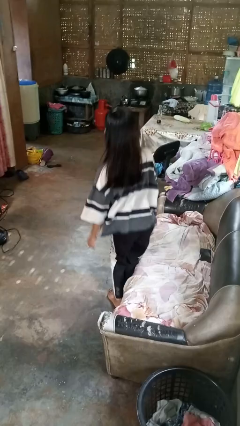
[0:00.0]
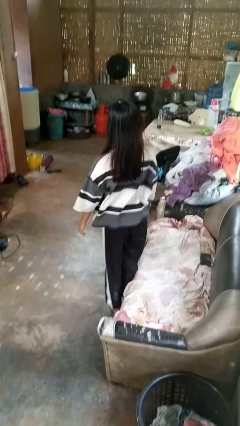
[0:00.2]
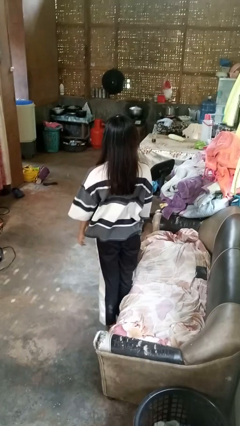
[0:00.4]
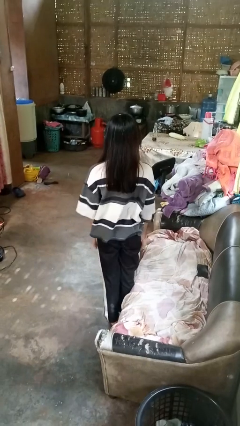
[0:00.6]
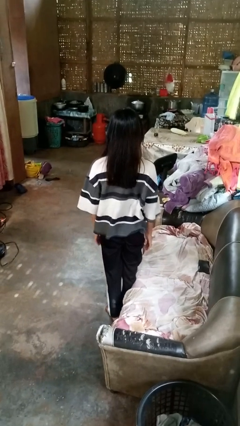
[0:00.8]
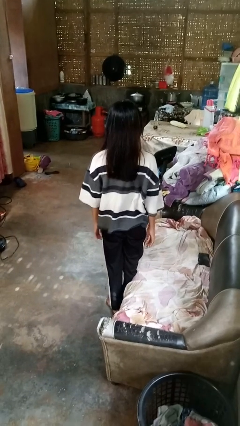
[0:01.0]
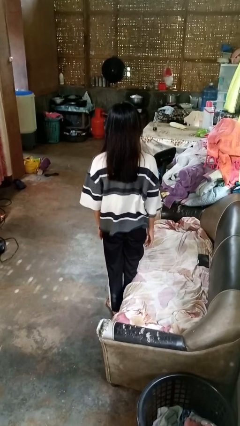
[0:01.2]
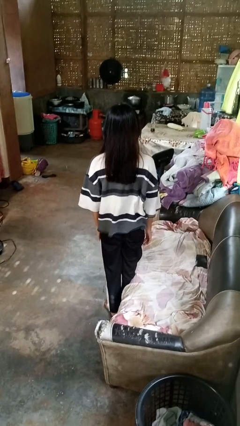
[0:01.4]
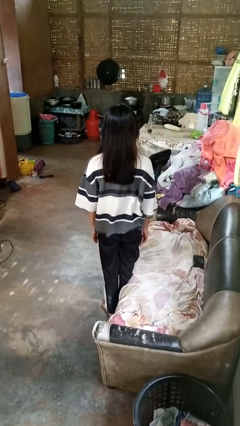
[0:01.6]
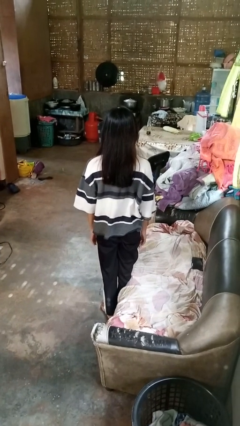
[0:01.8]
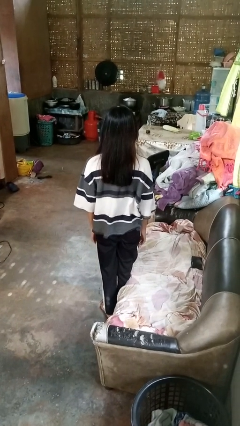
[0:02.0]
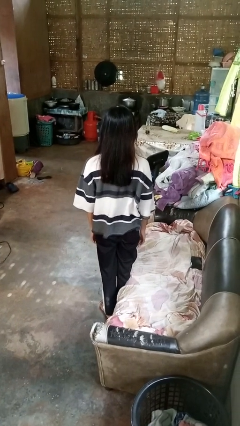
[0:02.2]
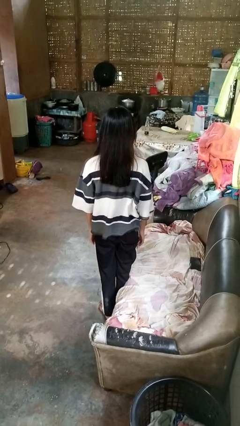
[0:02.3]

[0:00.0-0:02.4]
person stands up

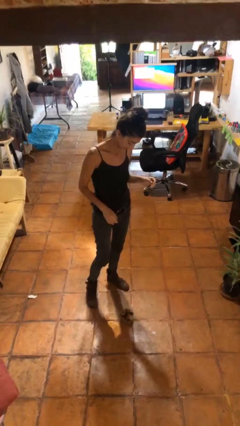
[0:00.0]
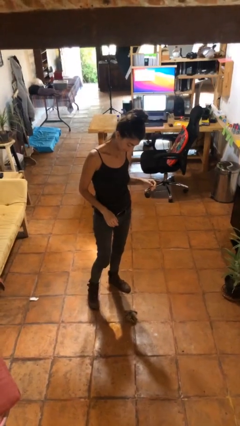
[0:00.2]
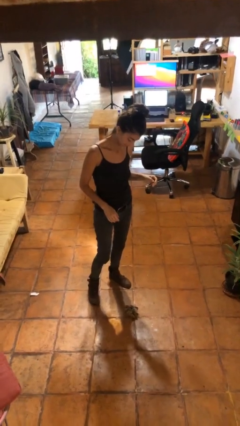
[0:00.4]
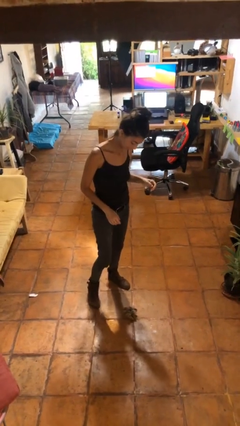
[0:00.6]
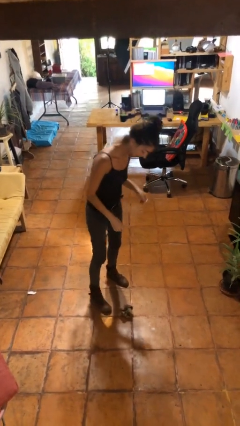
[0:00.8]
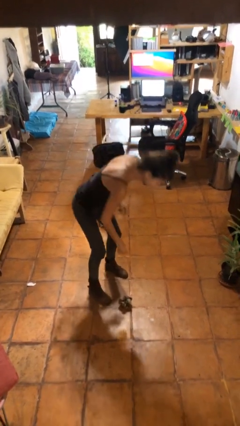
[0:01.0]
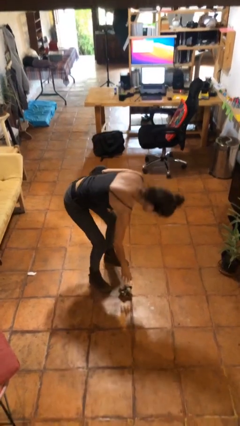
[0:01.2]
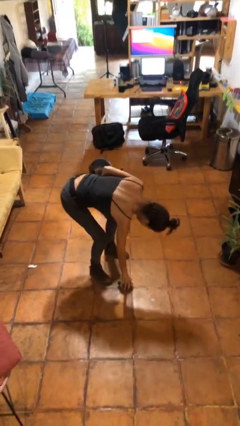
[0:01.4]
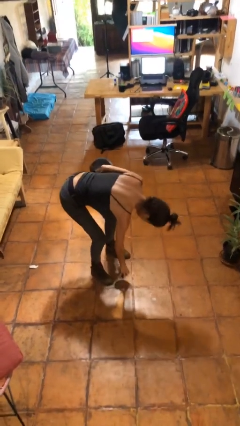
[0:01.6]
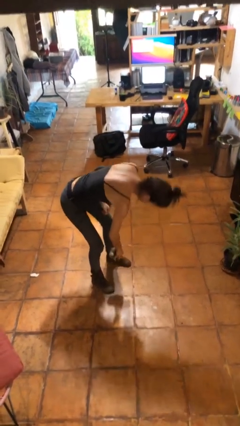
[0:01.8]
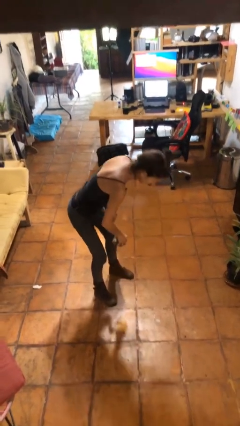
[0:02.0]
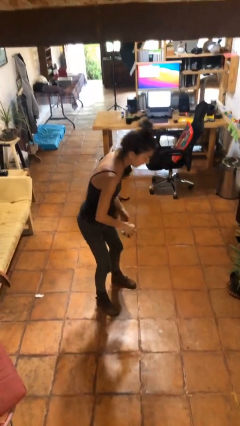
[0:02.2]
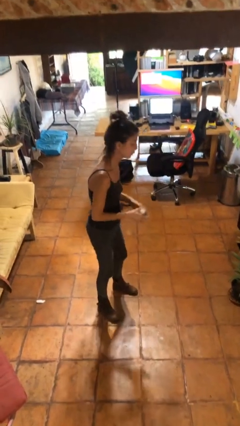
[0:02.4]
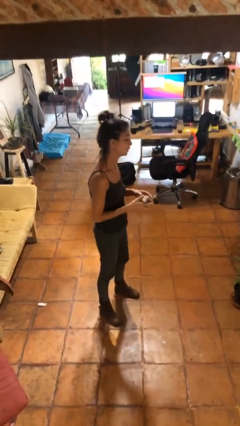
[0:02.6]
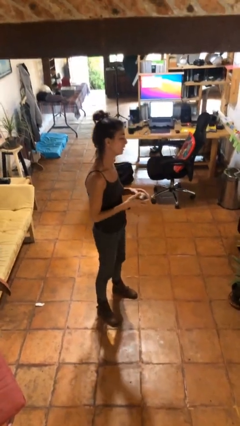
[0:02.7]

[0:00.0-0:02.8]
person picks up object from floor

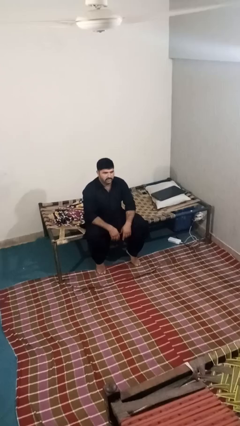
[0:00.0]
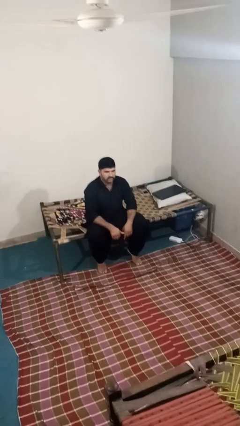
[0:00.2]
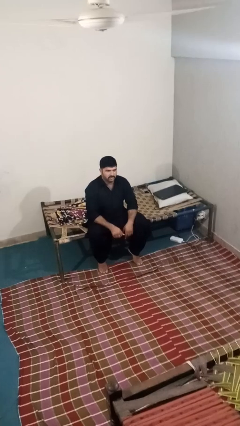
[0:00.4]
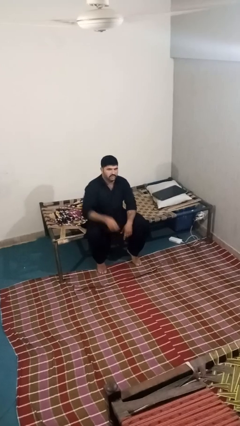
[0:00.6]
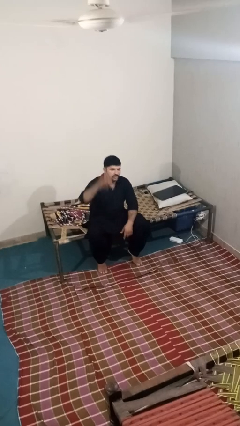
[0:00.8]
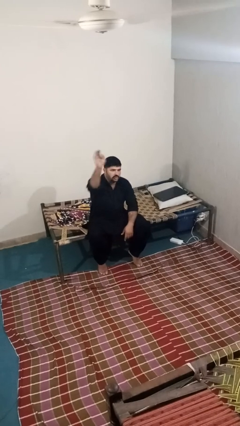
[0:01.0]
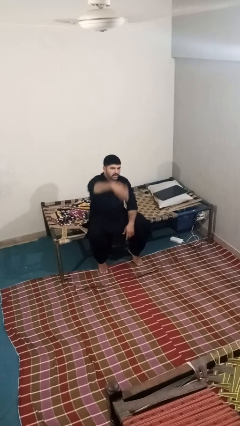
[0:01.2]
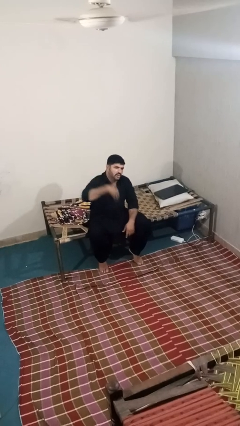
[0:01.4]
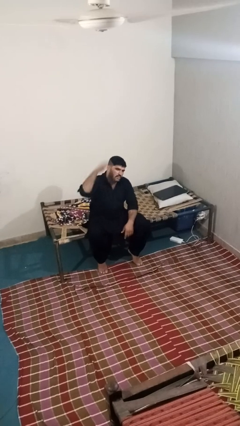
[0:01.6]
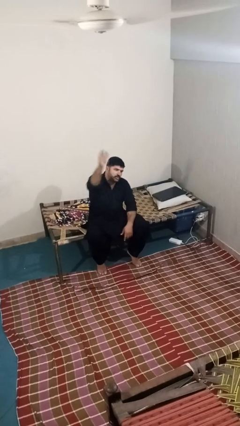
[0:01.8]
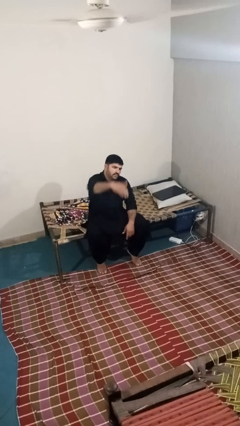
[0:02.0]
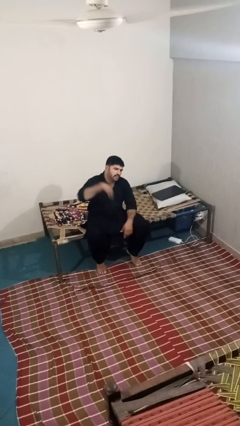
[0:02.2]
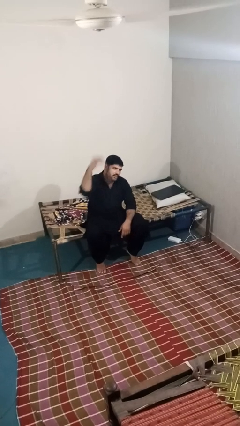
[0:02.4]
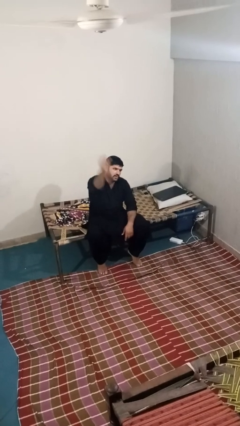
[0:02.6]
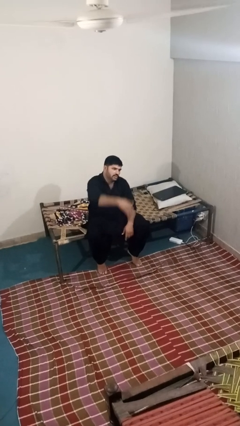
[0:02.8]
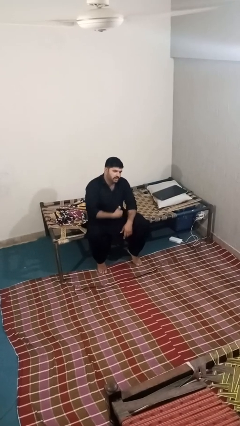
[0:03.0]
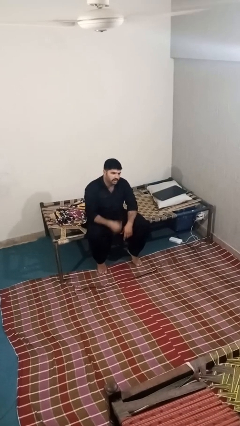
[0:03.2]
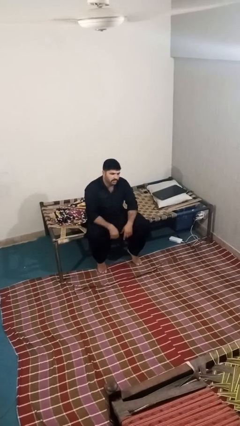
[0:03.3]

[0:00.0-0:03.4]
person gestures come here

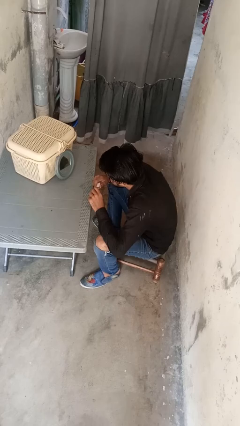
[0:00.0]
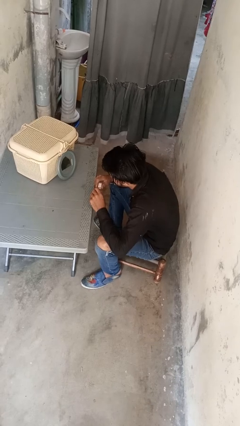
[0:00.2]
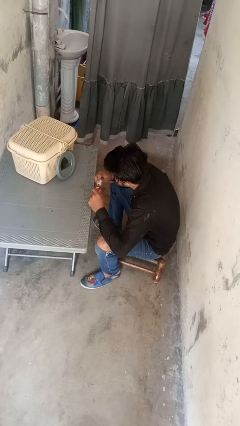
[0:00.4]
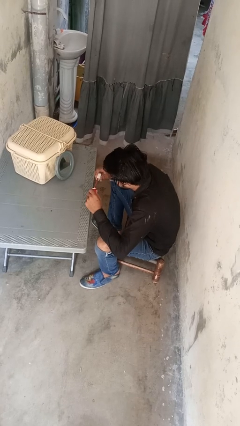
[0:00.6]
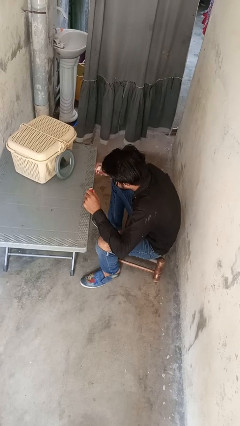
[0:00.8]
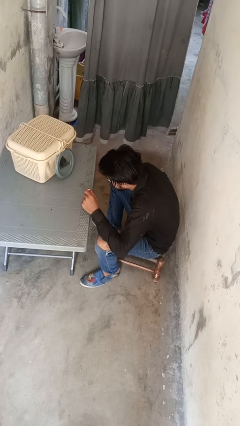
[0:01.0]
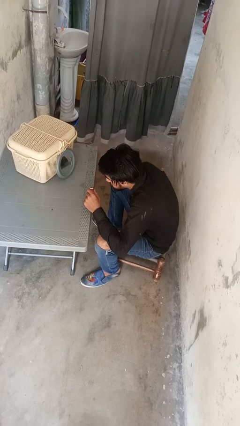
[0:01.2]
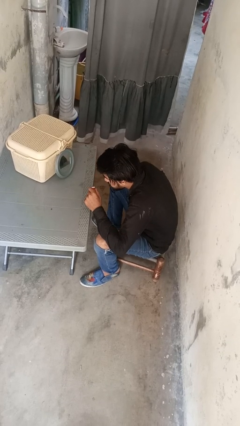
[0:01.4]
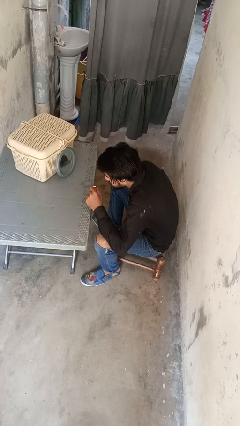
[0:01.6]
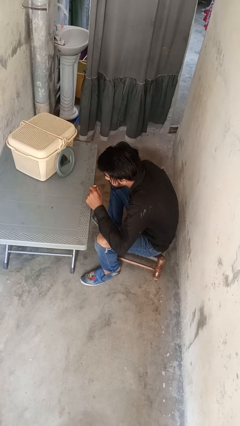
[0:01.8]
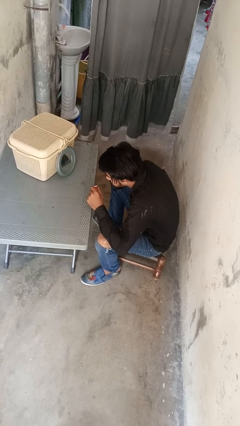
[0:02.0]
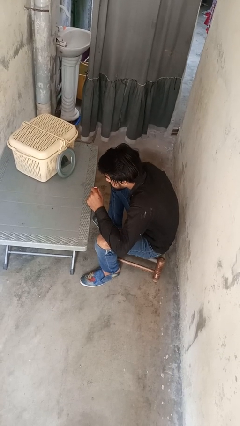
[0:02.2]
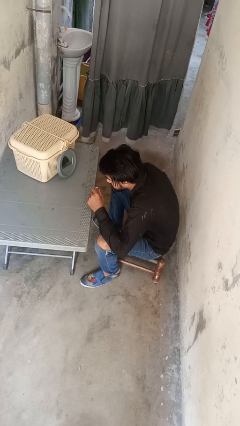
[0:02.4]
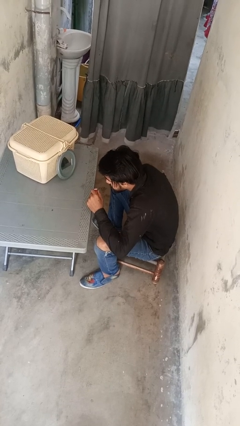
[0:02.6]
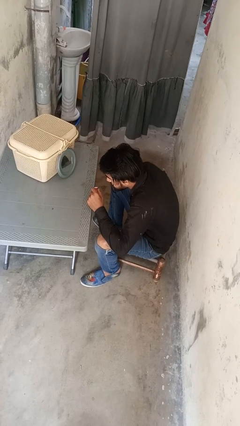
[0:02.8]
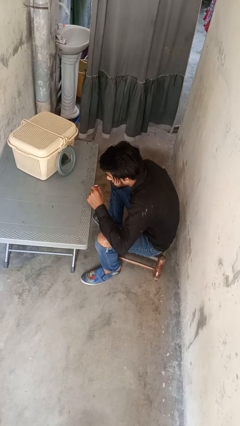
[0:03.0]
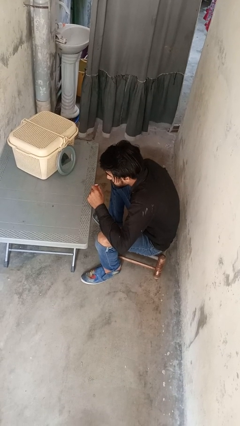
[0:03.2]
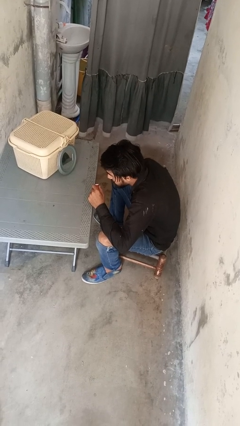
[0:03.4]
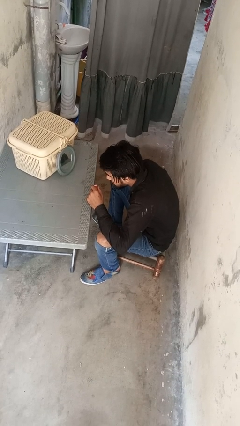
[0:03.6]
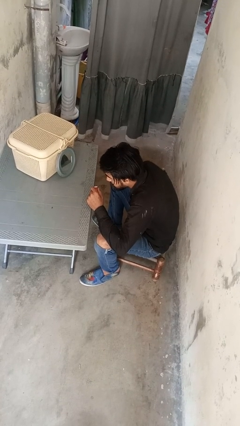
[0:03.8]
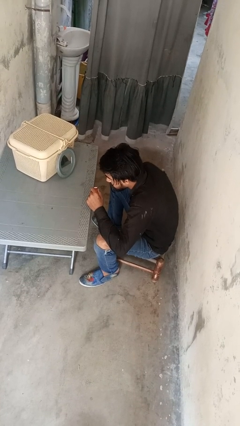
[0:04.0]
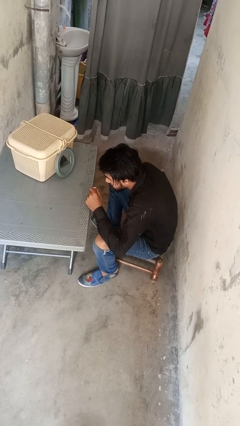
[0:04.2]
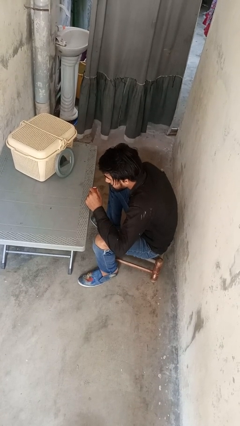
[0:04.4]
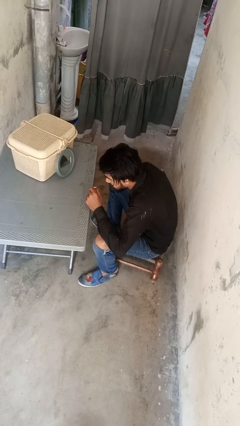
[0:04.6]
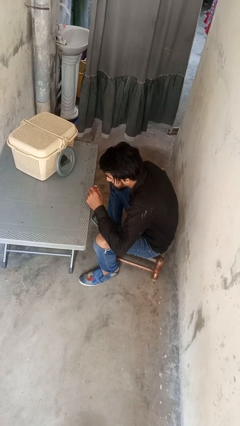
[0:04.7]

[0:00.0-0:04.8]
person applies eye makeup

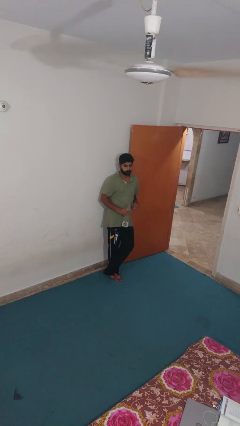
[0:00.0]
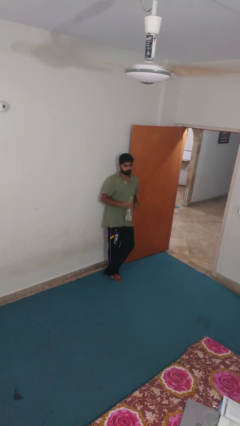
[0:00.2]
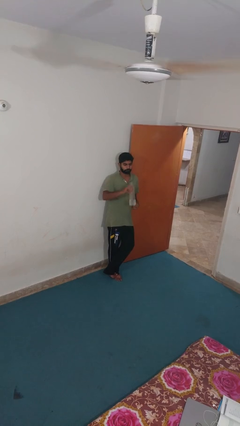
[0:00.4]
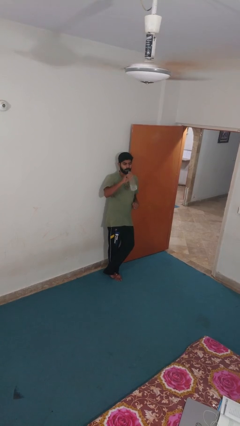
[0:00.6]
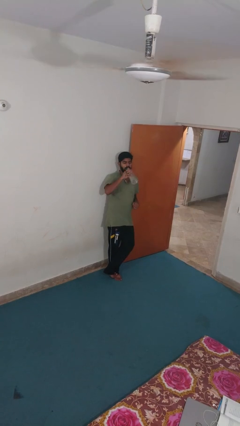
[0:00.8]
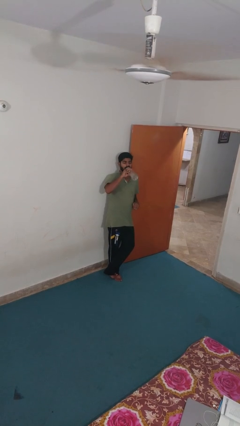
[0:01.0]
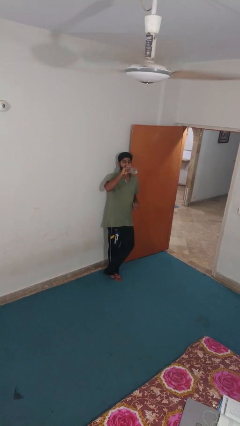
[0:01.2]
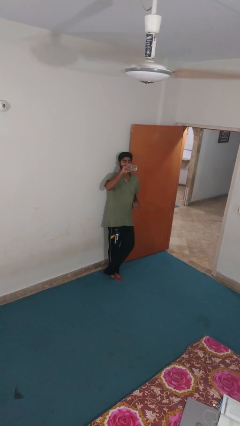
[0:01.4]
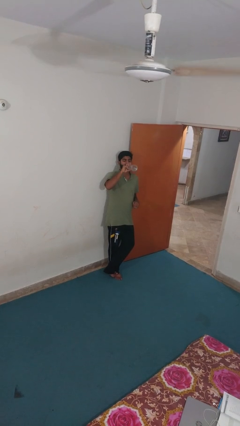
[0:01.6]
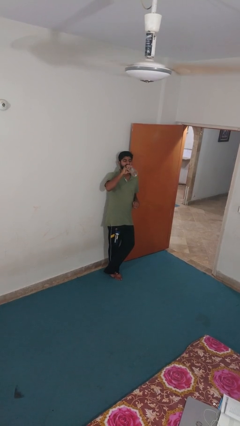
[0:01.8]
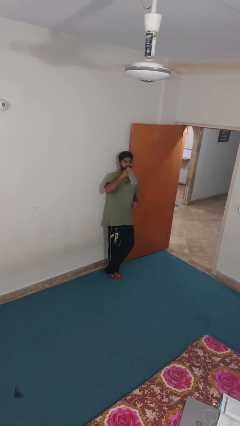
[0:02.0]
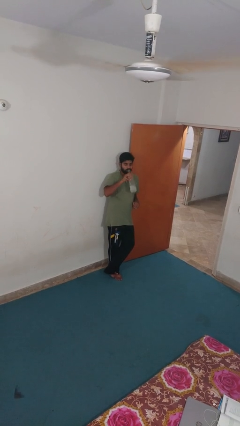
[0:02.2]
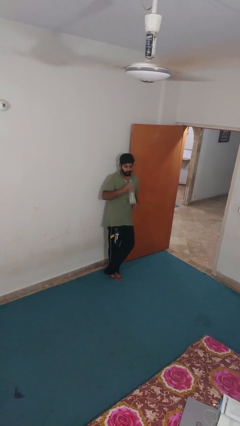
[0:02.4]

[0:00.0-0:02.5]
person drinks from bottle

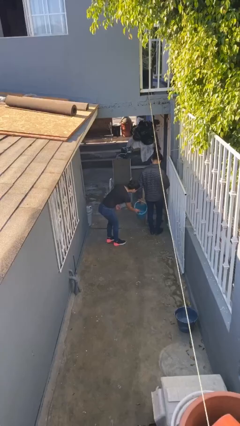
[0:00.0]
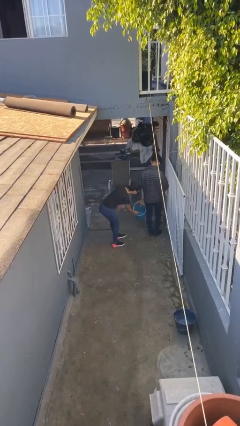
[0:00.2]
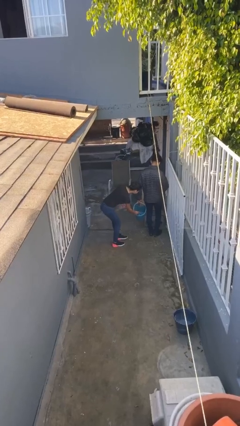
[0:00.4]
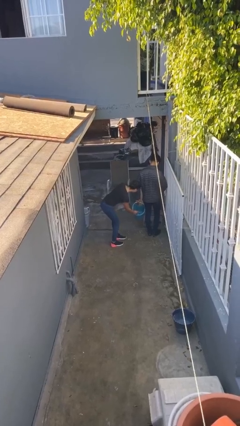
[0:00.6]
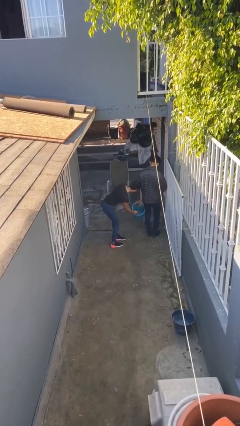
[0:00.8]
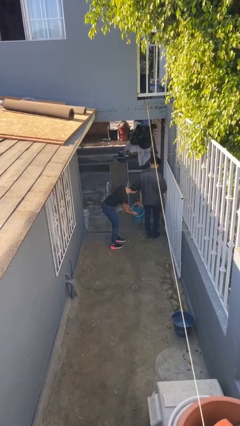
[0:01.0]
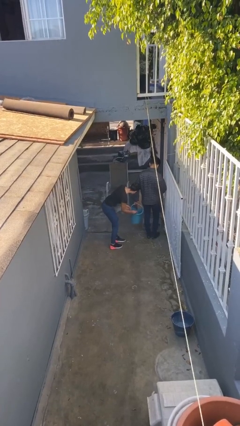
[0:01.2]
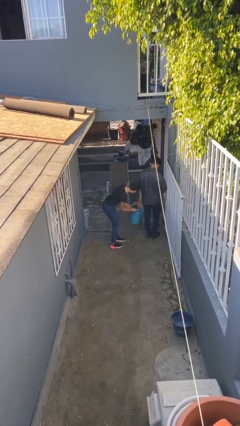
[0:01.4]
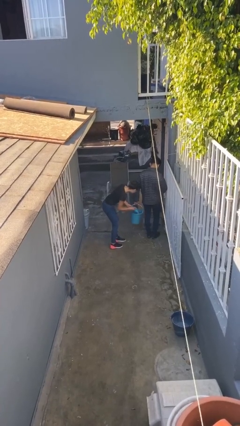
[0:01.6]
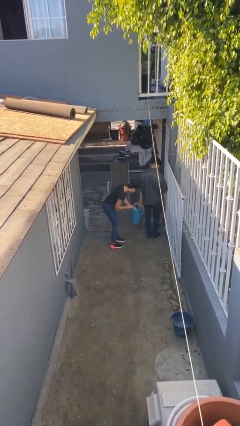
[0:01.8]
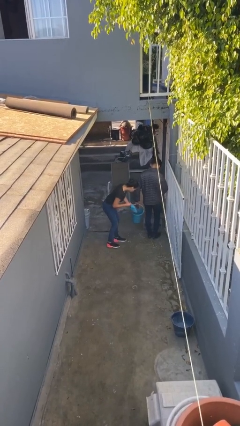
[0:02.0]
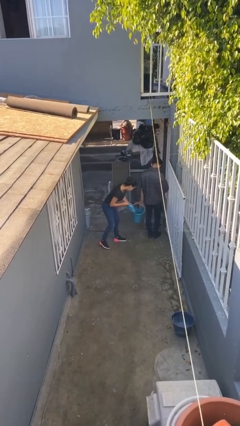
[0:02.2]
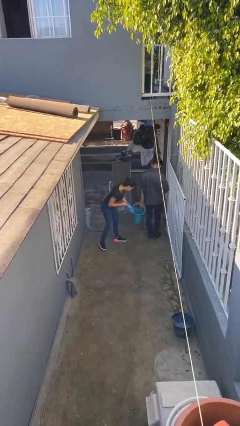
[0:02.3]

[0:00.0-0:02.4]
person steals object from person
